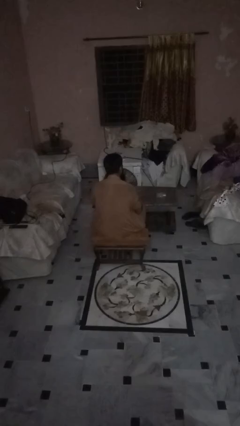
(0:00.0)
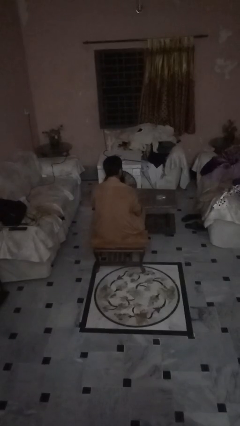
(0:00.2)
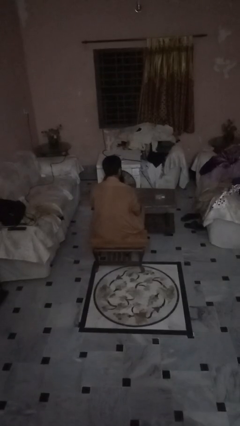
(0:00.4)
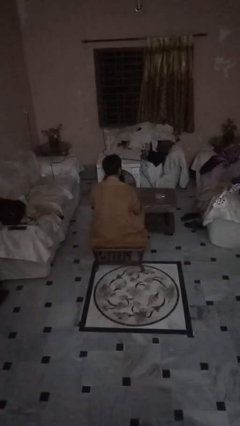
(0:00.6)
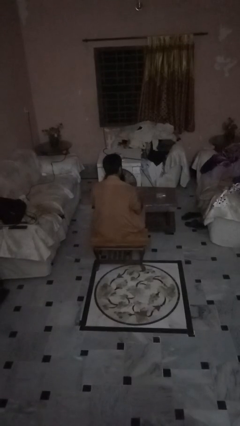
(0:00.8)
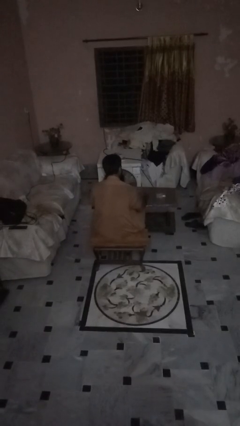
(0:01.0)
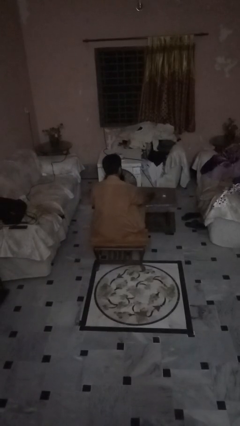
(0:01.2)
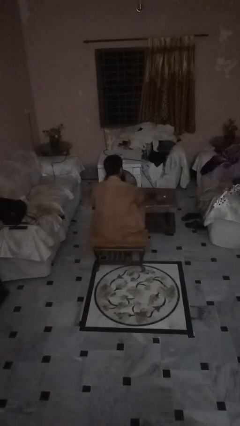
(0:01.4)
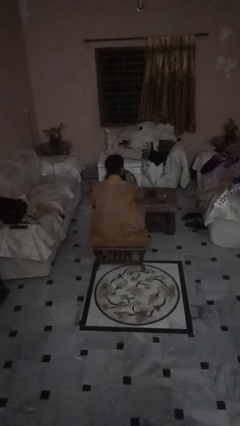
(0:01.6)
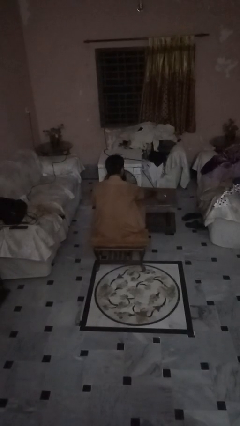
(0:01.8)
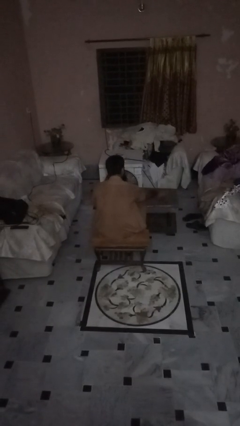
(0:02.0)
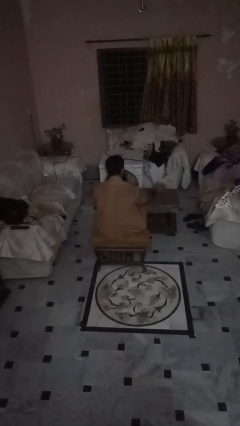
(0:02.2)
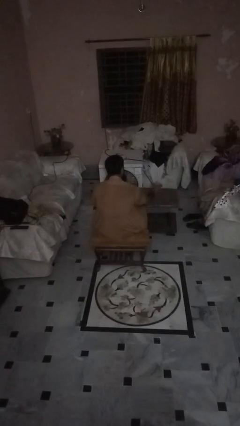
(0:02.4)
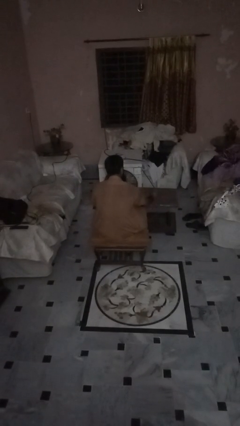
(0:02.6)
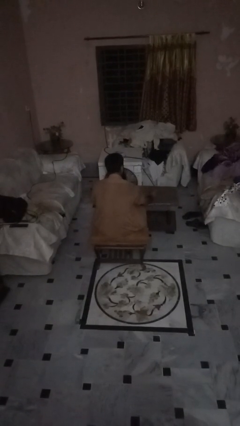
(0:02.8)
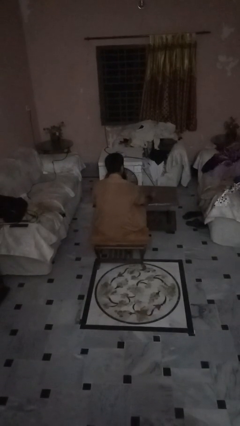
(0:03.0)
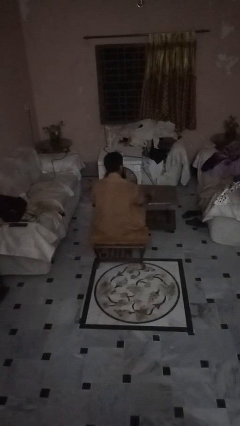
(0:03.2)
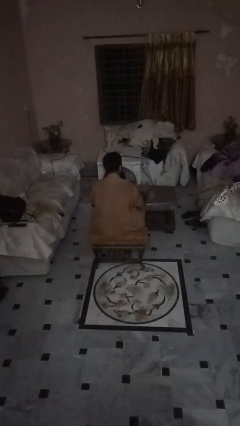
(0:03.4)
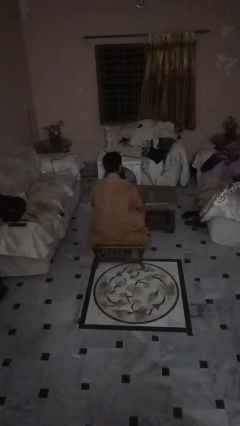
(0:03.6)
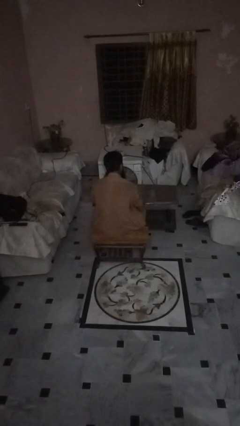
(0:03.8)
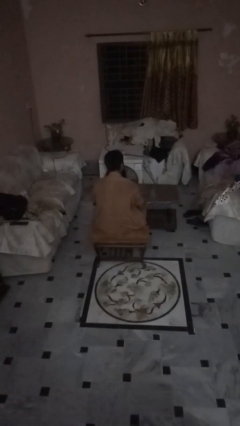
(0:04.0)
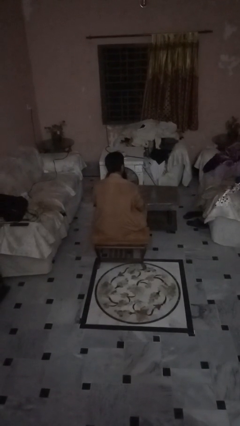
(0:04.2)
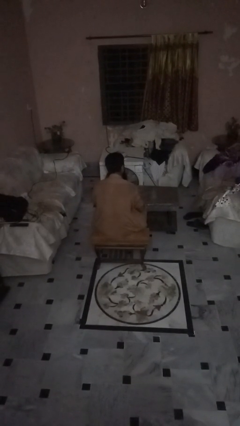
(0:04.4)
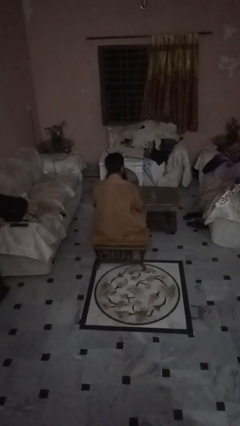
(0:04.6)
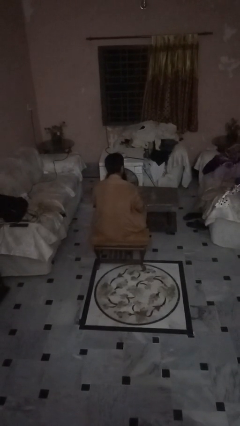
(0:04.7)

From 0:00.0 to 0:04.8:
person sets upright glass

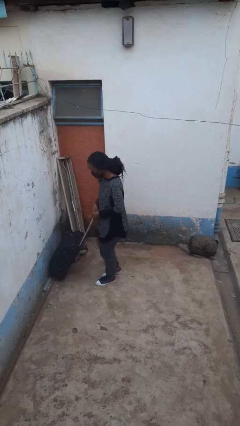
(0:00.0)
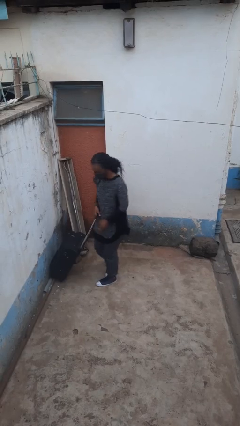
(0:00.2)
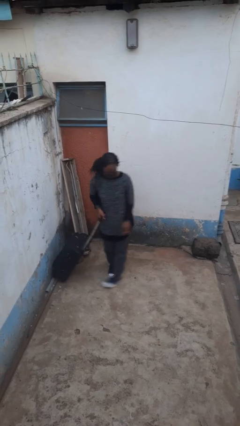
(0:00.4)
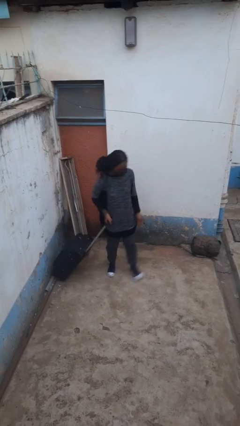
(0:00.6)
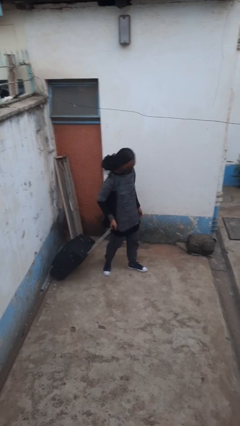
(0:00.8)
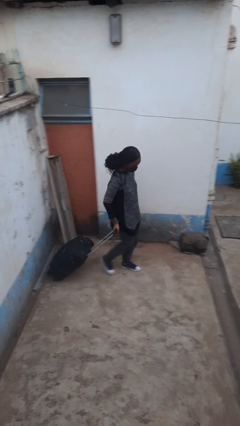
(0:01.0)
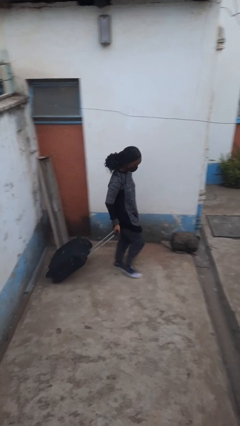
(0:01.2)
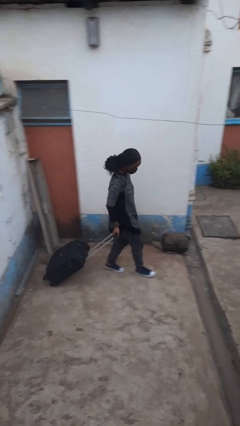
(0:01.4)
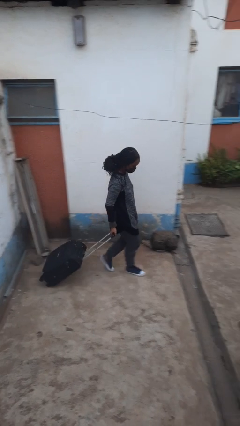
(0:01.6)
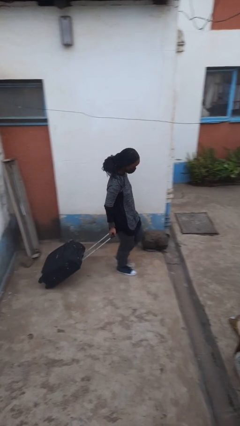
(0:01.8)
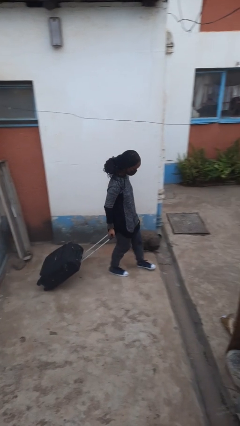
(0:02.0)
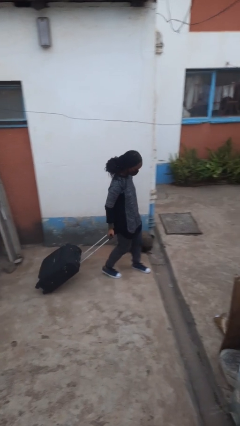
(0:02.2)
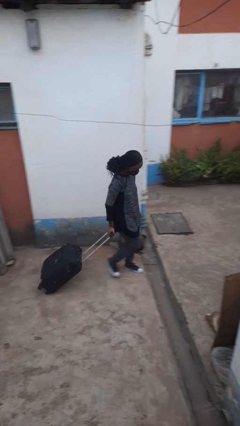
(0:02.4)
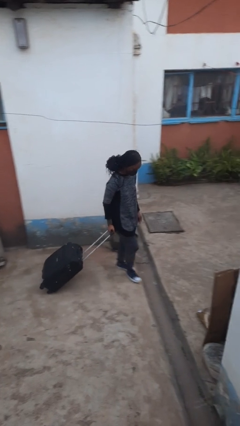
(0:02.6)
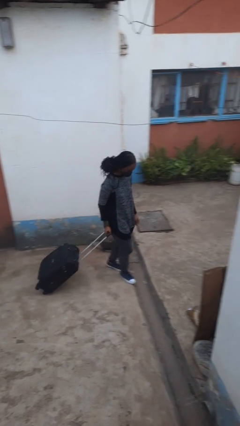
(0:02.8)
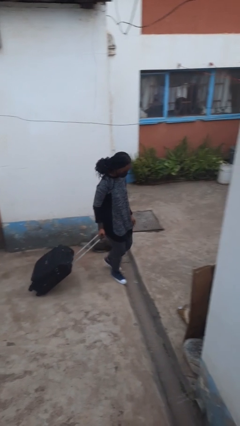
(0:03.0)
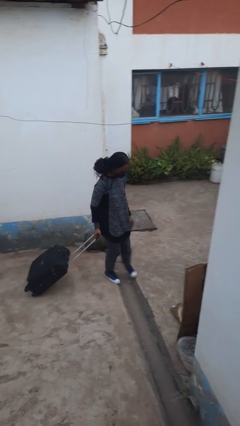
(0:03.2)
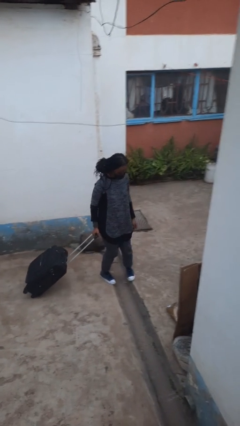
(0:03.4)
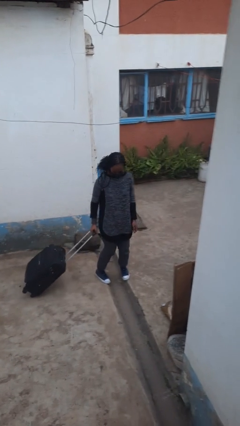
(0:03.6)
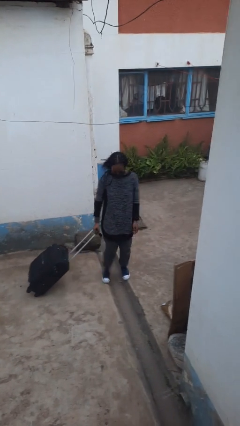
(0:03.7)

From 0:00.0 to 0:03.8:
person pulls wheeled cart

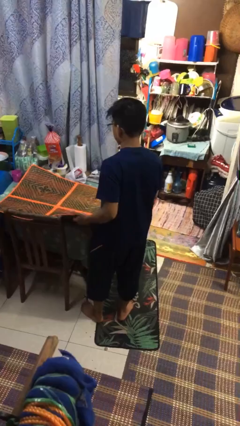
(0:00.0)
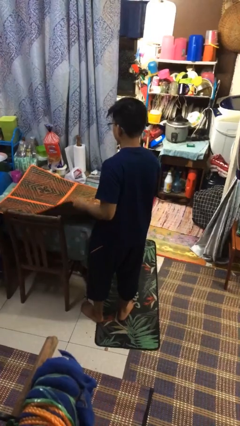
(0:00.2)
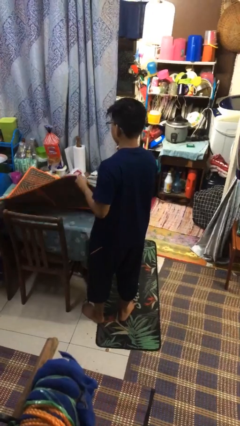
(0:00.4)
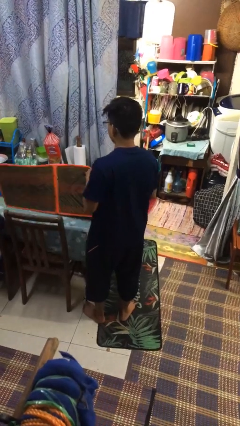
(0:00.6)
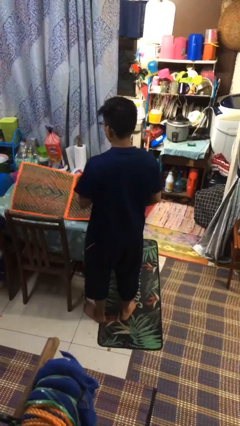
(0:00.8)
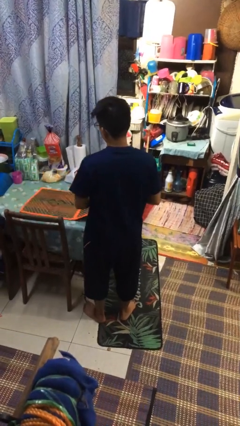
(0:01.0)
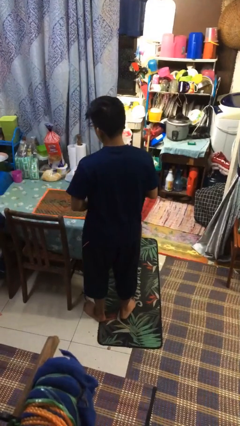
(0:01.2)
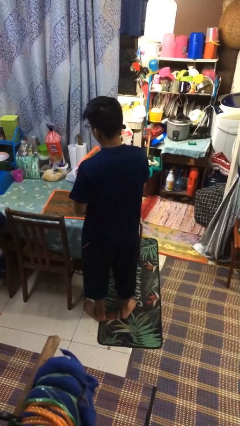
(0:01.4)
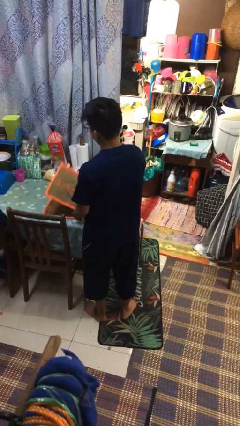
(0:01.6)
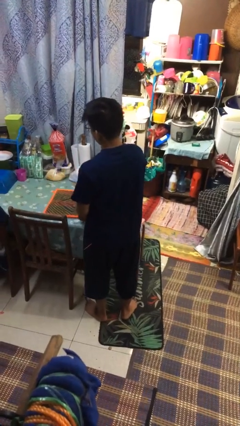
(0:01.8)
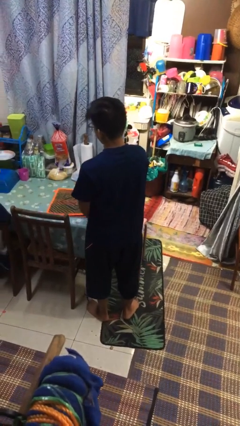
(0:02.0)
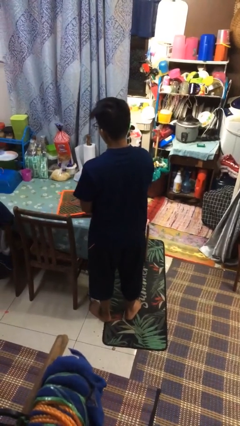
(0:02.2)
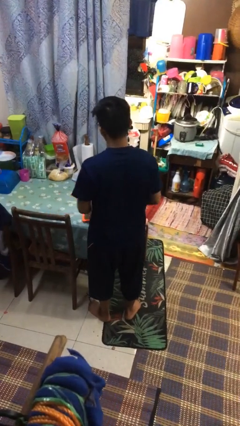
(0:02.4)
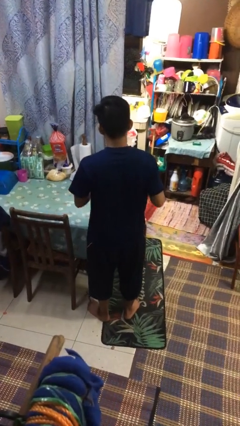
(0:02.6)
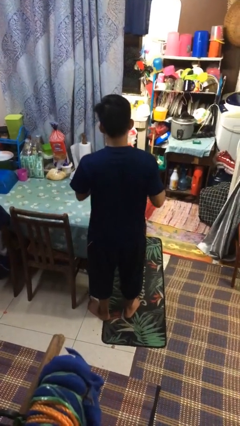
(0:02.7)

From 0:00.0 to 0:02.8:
person folds tablecloth

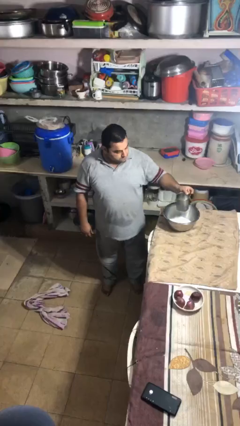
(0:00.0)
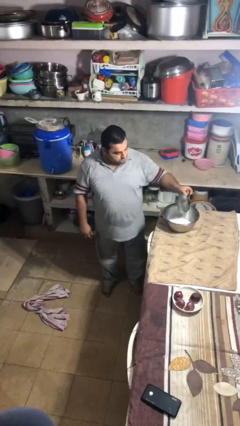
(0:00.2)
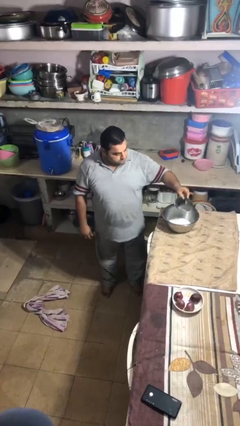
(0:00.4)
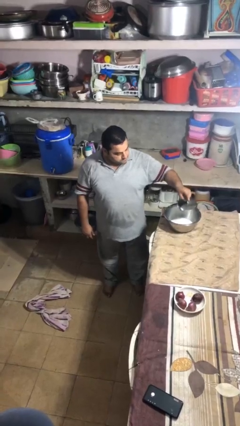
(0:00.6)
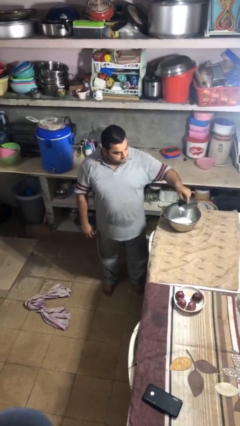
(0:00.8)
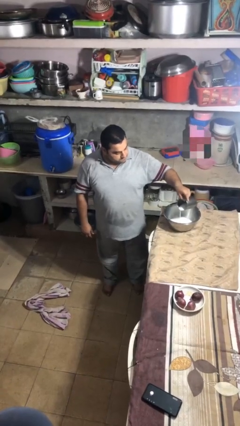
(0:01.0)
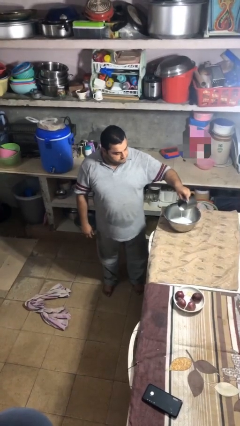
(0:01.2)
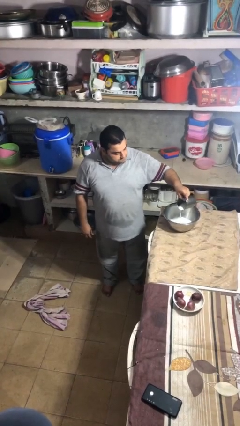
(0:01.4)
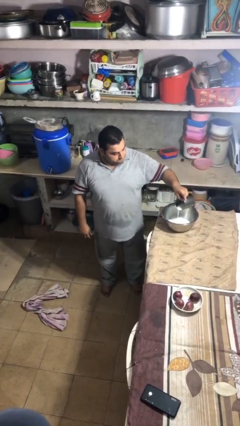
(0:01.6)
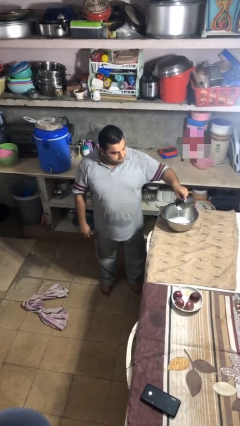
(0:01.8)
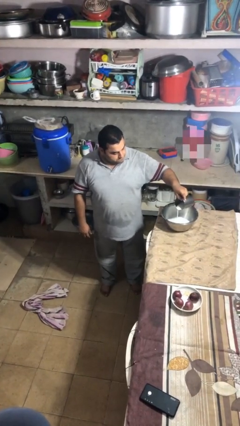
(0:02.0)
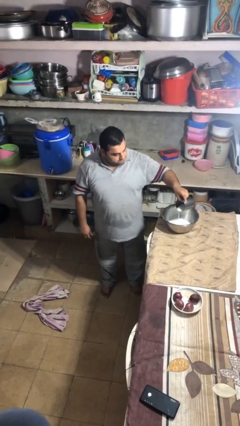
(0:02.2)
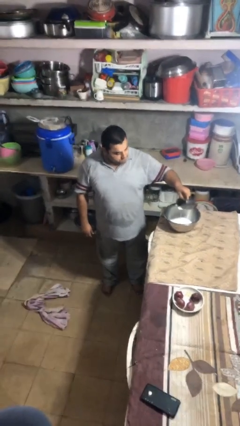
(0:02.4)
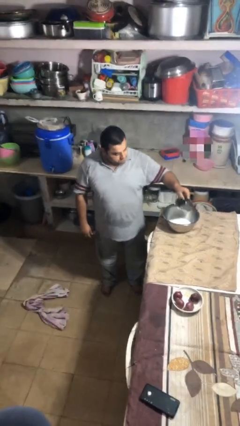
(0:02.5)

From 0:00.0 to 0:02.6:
person pours into bowl

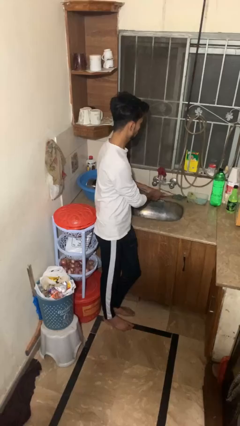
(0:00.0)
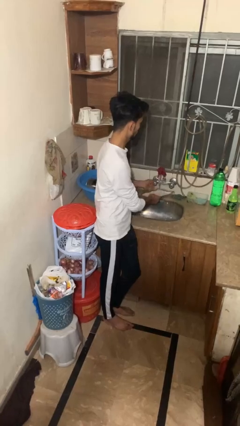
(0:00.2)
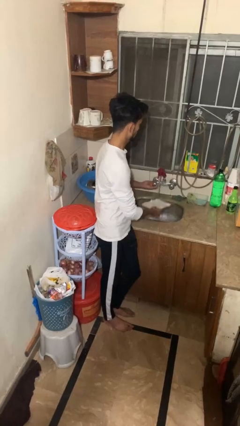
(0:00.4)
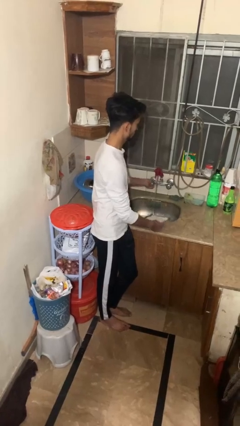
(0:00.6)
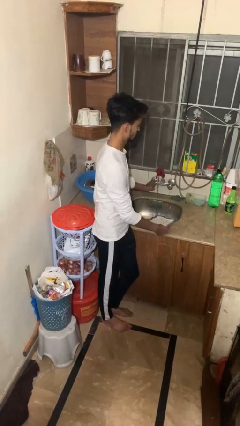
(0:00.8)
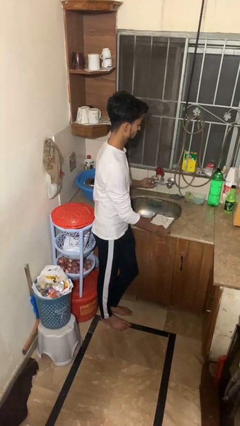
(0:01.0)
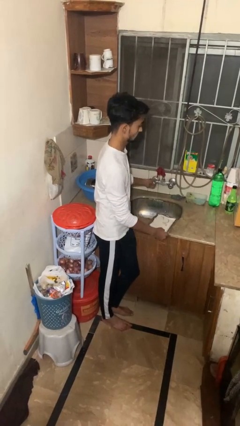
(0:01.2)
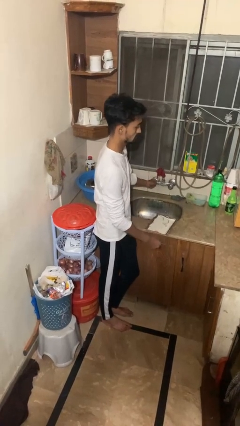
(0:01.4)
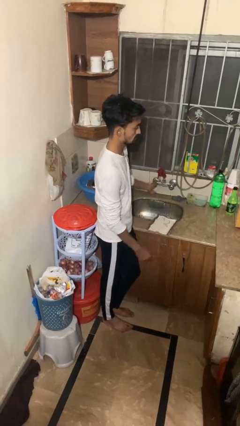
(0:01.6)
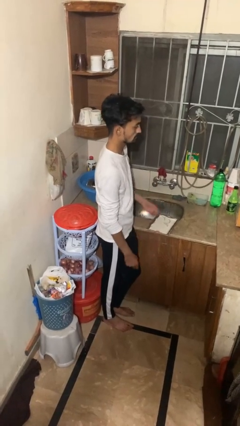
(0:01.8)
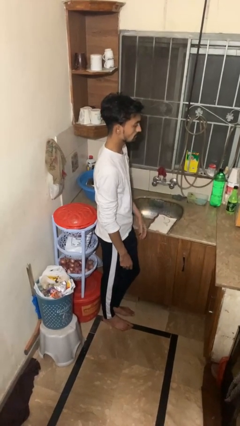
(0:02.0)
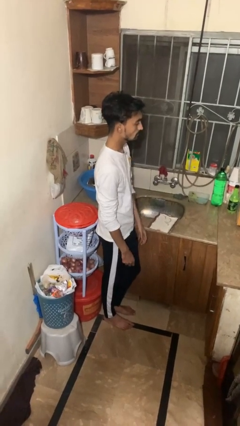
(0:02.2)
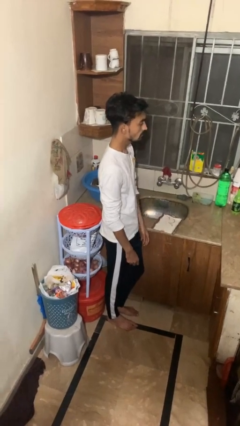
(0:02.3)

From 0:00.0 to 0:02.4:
person closes dishwasher
